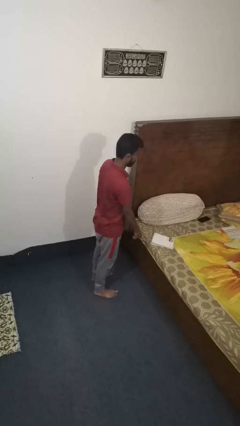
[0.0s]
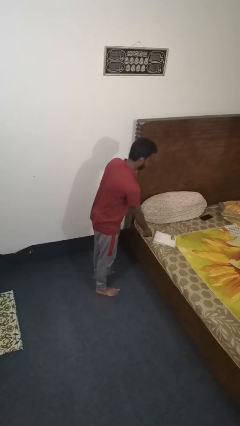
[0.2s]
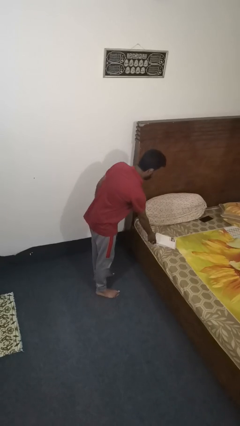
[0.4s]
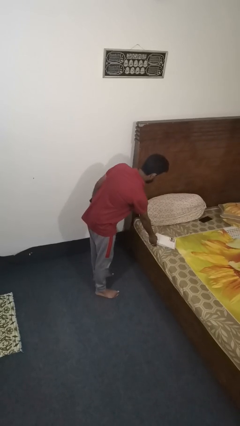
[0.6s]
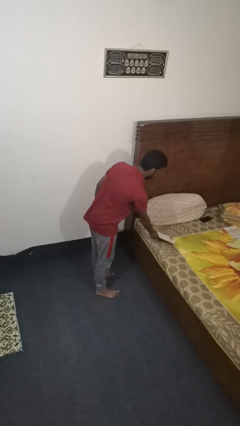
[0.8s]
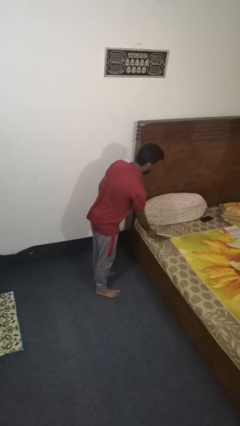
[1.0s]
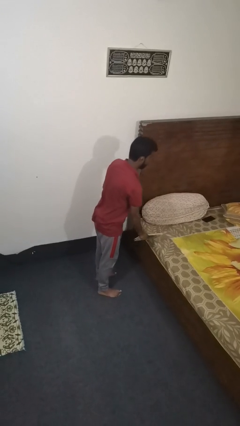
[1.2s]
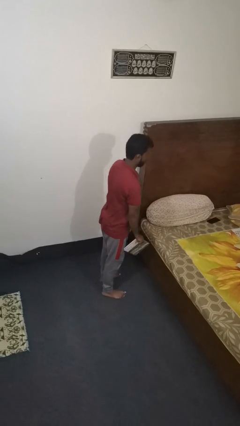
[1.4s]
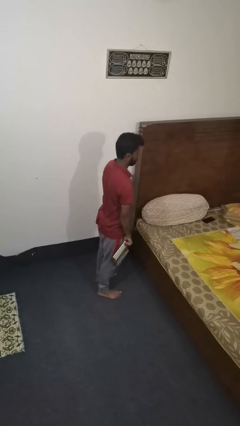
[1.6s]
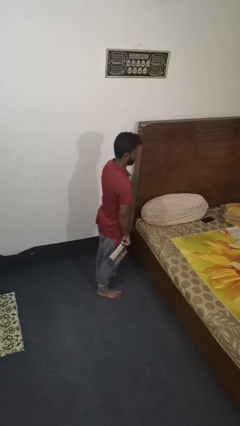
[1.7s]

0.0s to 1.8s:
person picks up object from bed

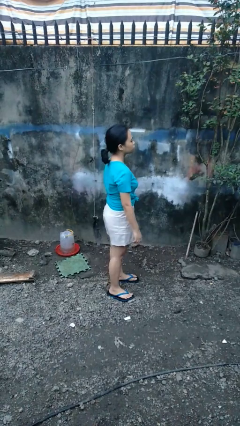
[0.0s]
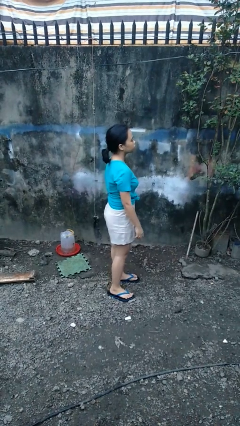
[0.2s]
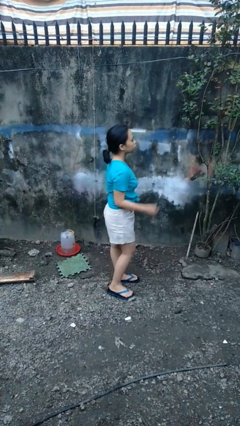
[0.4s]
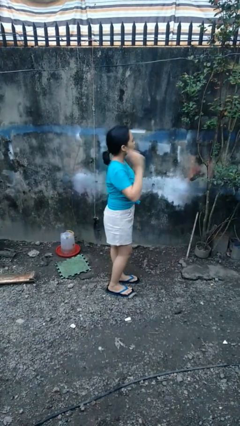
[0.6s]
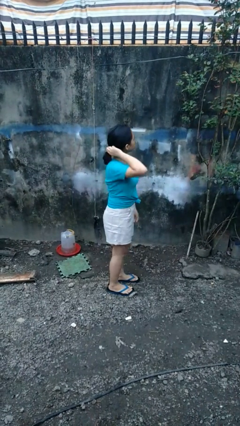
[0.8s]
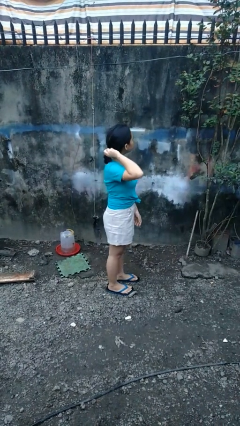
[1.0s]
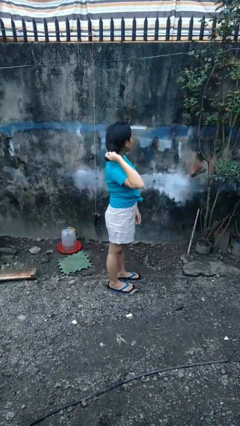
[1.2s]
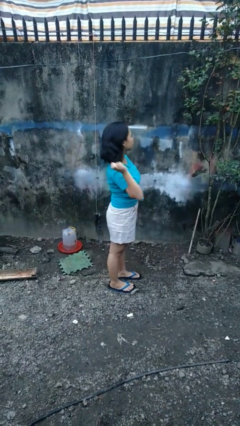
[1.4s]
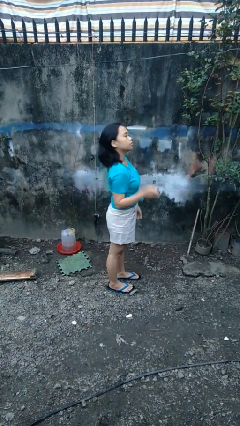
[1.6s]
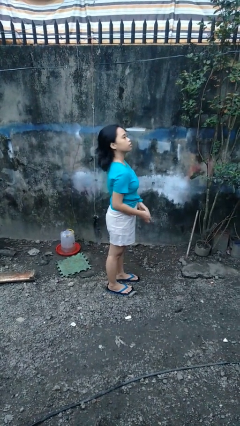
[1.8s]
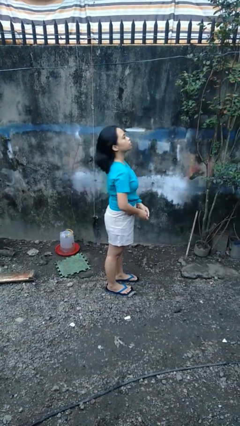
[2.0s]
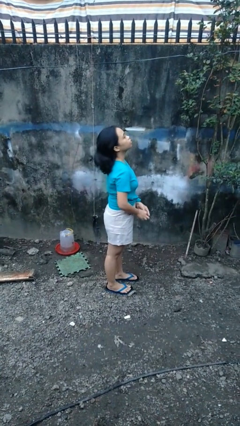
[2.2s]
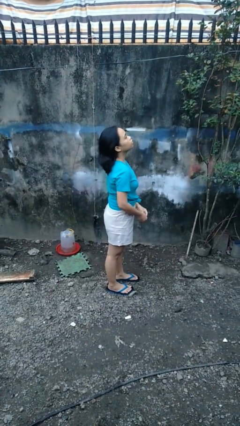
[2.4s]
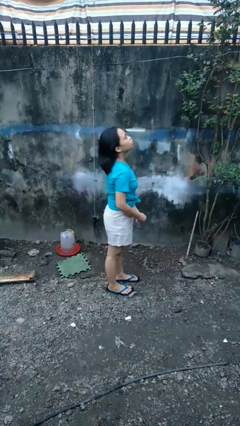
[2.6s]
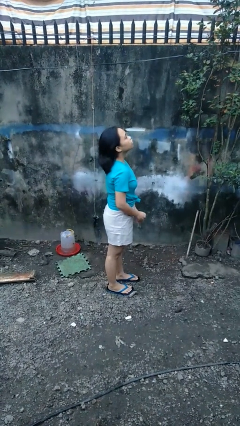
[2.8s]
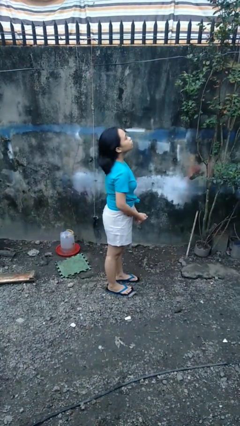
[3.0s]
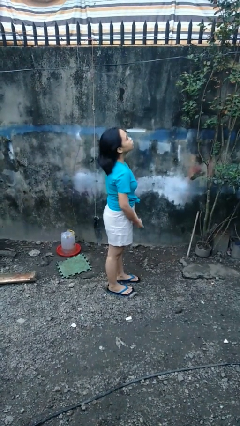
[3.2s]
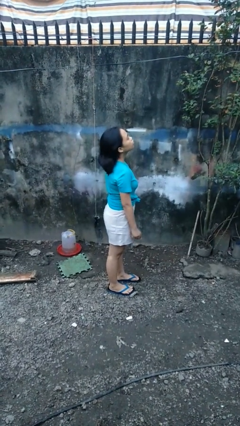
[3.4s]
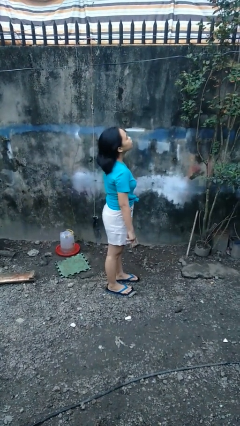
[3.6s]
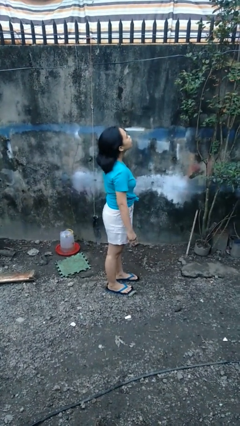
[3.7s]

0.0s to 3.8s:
person takes off hairtie

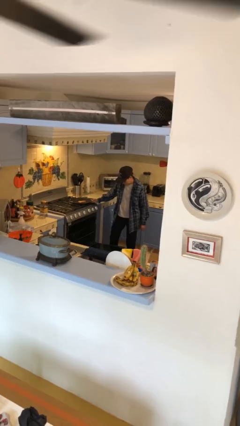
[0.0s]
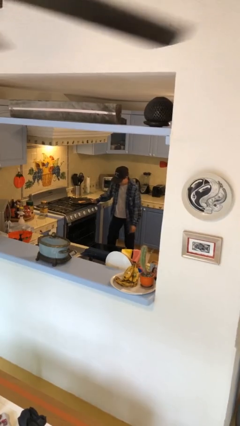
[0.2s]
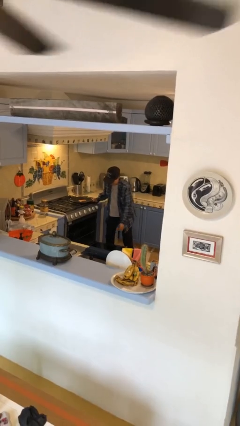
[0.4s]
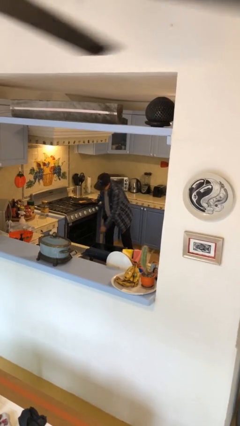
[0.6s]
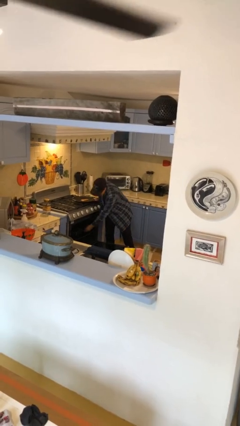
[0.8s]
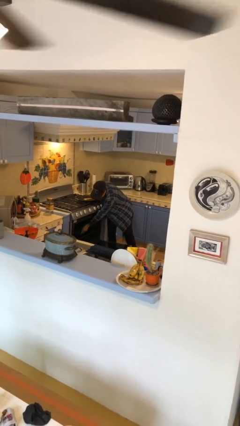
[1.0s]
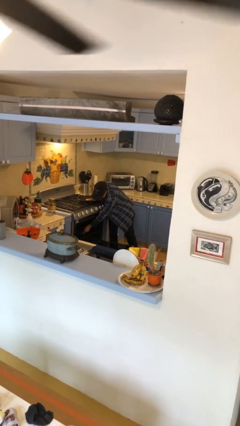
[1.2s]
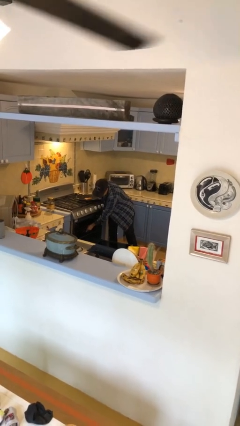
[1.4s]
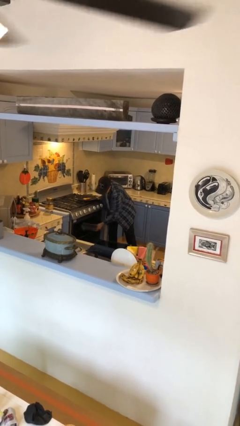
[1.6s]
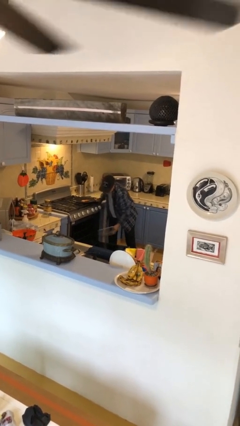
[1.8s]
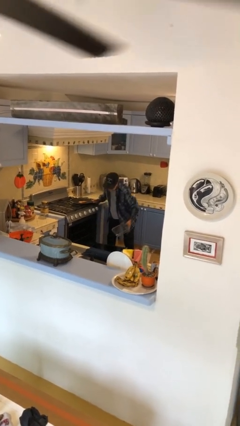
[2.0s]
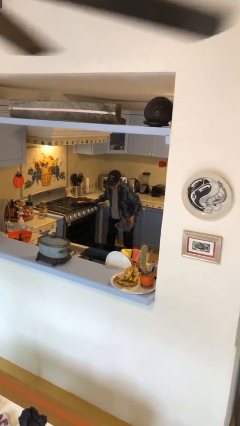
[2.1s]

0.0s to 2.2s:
person takes object from oven

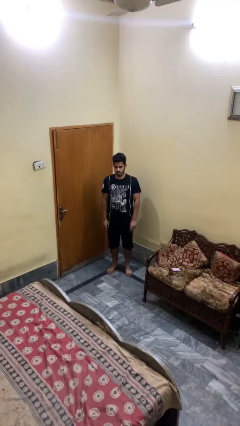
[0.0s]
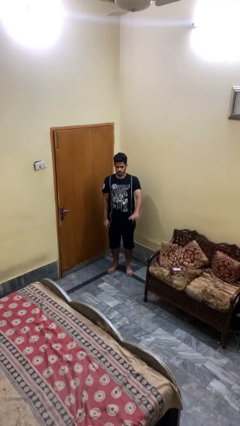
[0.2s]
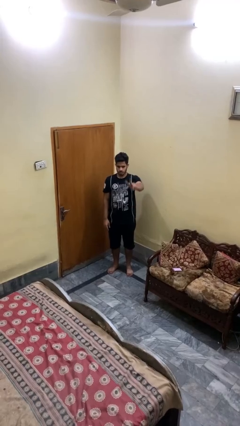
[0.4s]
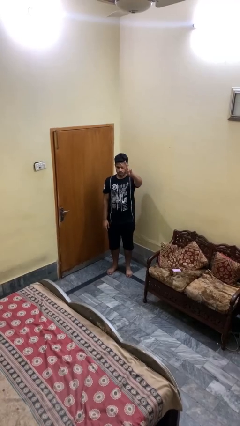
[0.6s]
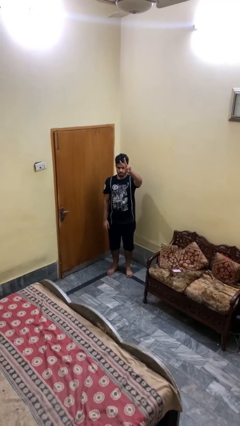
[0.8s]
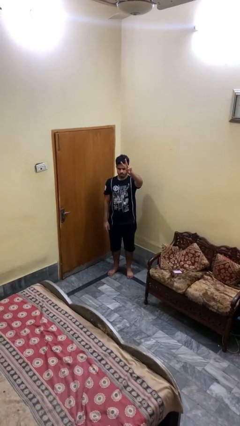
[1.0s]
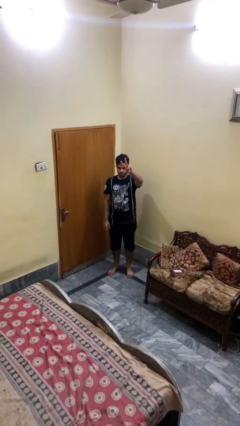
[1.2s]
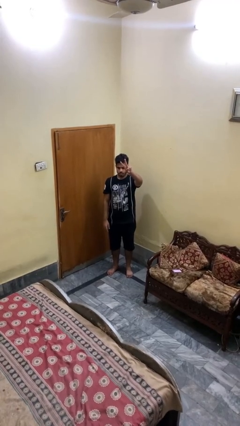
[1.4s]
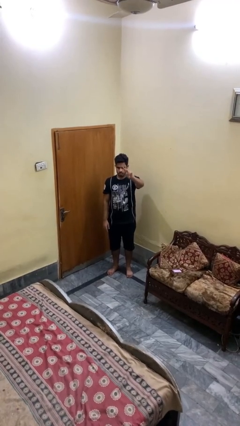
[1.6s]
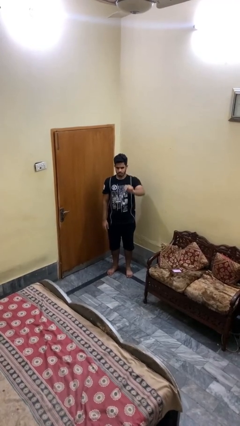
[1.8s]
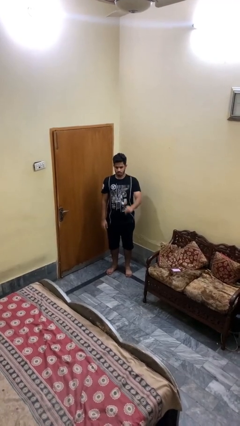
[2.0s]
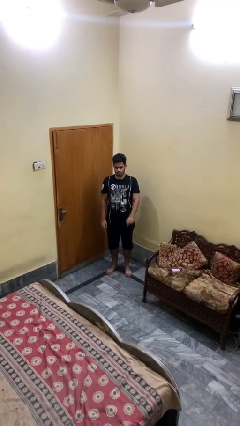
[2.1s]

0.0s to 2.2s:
person gestures peace

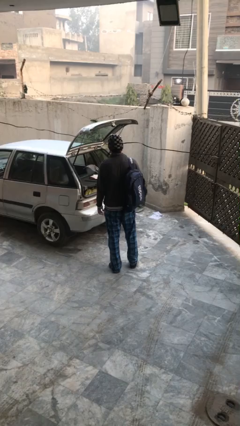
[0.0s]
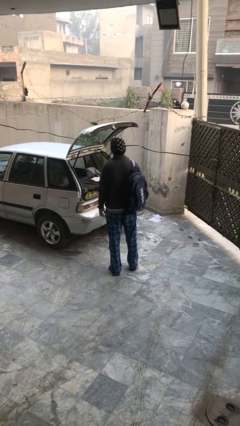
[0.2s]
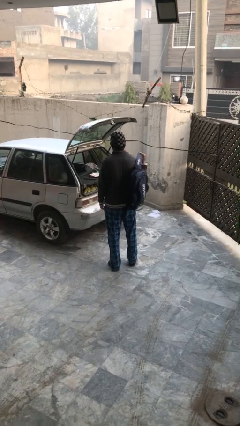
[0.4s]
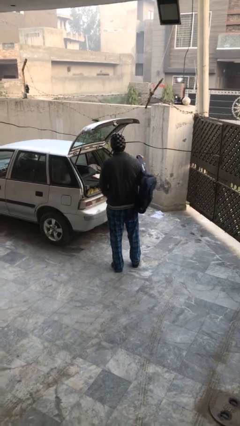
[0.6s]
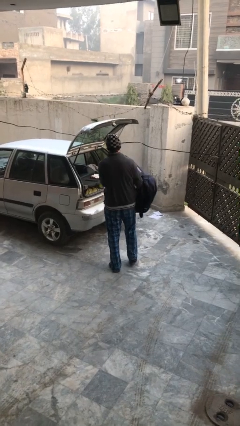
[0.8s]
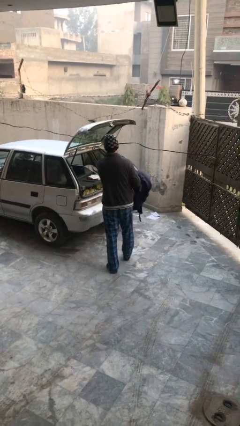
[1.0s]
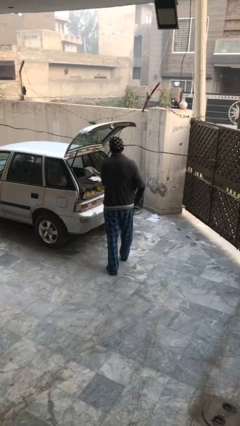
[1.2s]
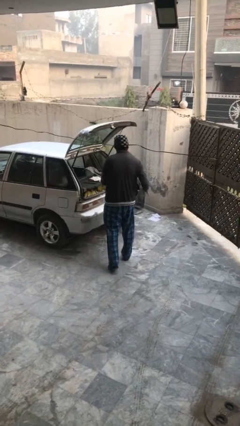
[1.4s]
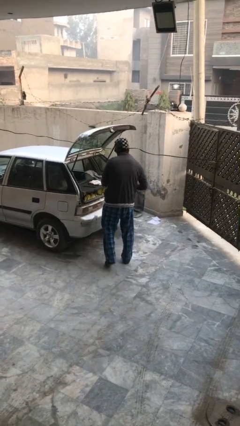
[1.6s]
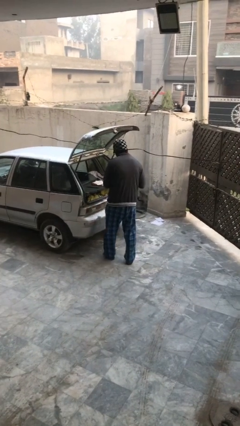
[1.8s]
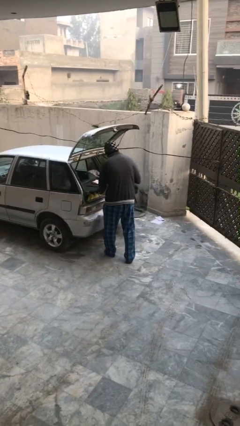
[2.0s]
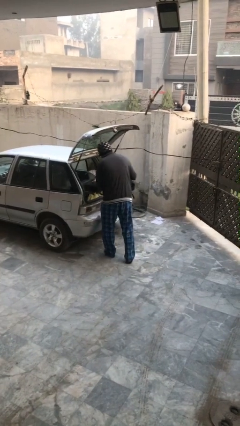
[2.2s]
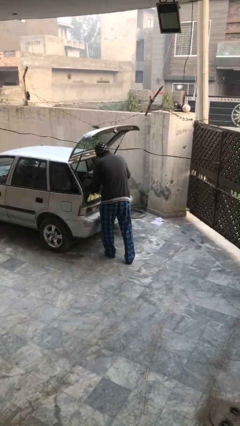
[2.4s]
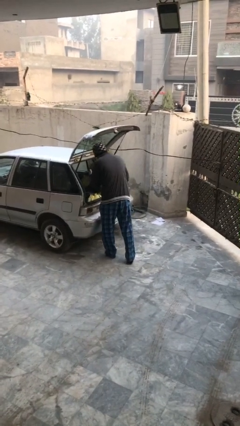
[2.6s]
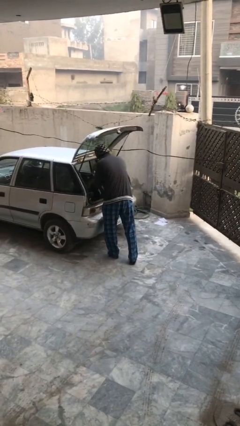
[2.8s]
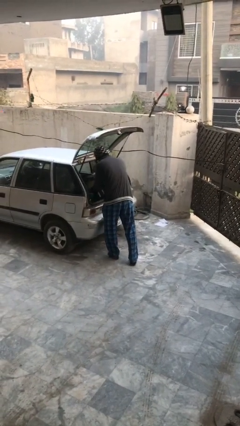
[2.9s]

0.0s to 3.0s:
person loads car

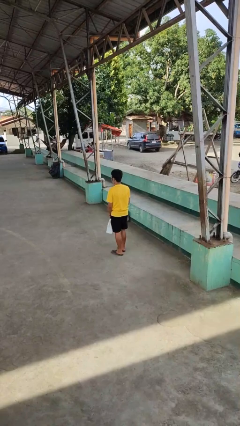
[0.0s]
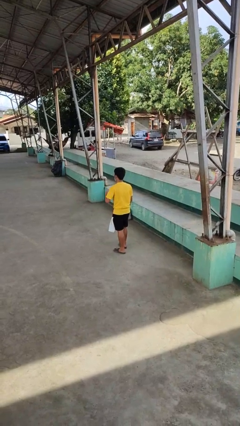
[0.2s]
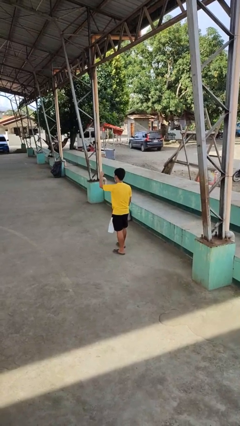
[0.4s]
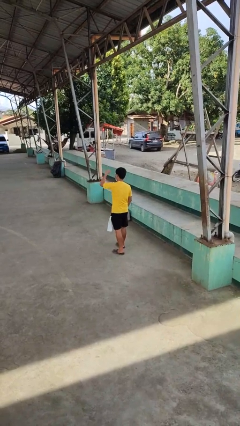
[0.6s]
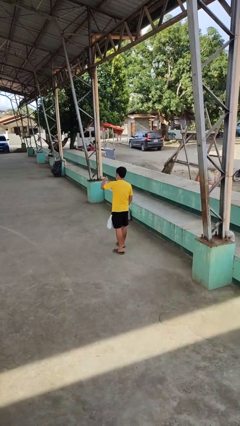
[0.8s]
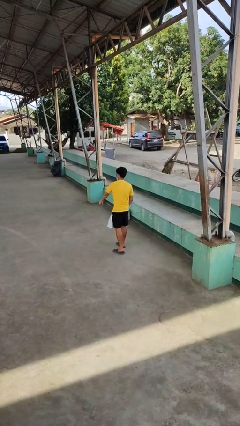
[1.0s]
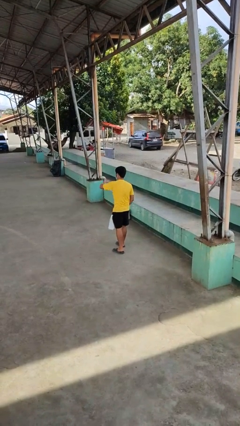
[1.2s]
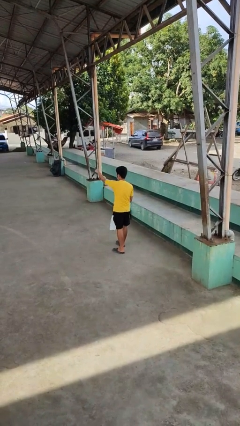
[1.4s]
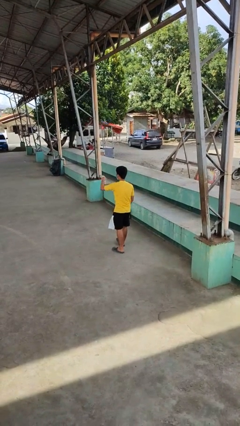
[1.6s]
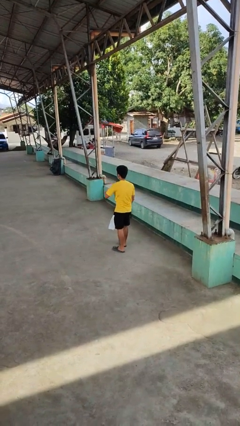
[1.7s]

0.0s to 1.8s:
person punches

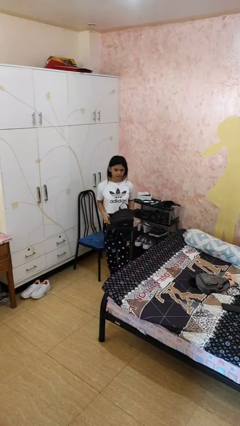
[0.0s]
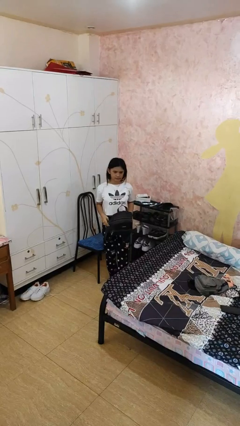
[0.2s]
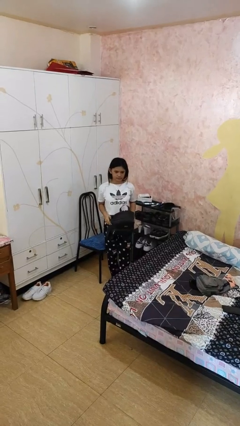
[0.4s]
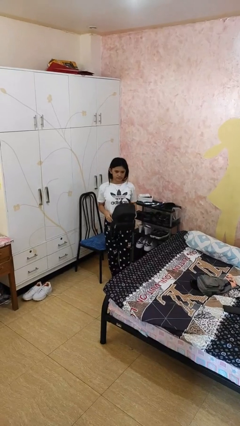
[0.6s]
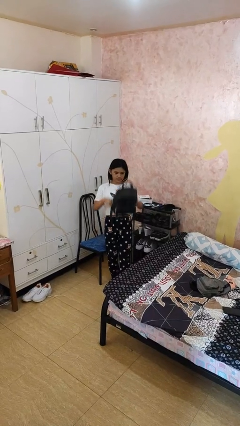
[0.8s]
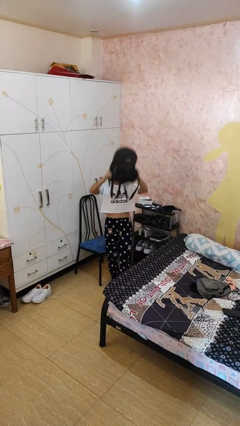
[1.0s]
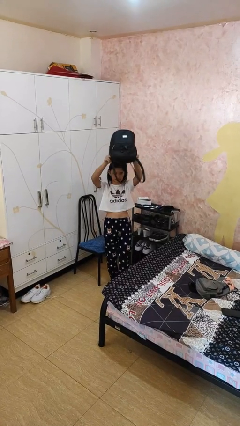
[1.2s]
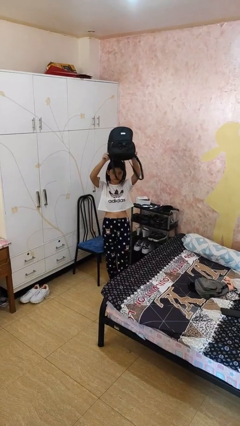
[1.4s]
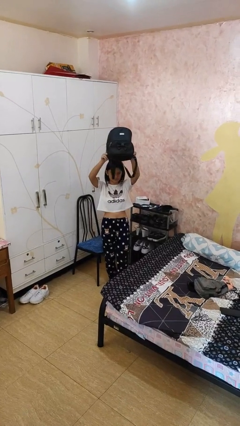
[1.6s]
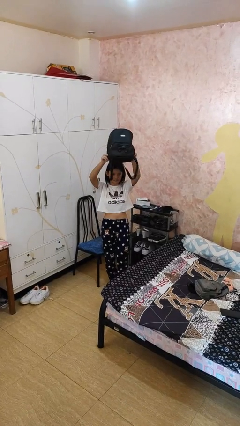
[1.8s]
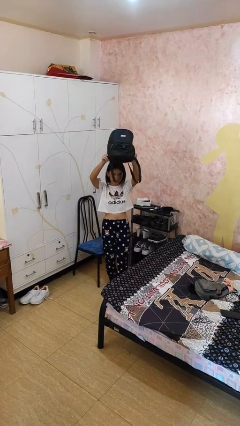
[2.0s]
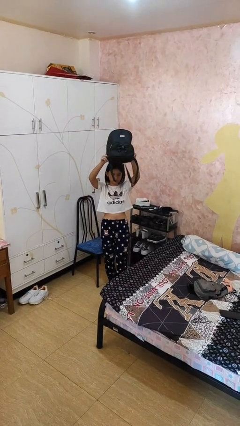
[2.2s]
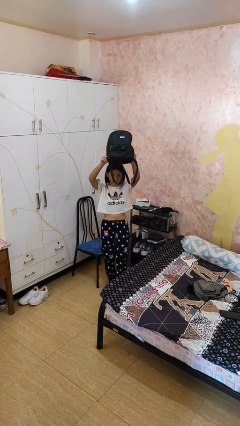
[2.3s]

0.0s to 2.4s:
person holds object above head
